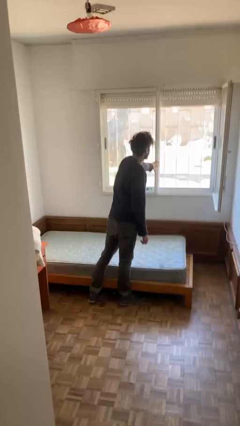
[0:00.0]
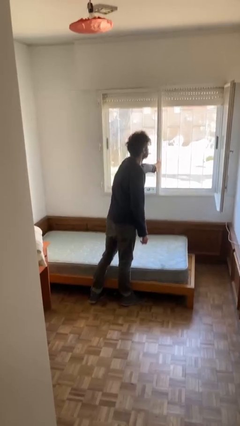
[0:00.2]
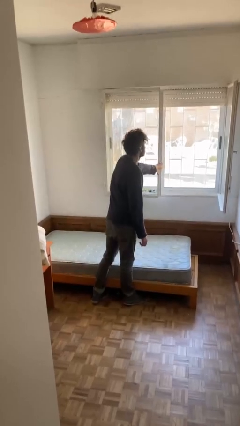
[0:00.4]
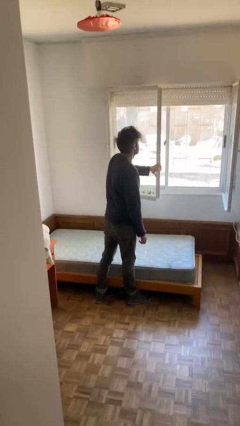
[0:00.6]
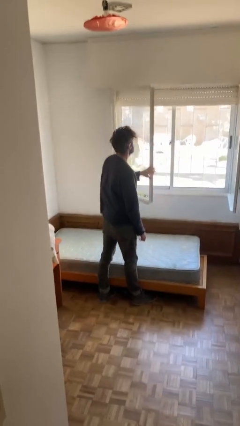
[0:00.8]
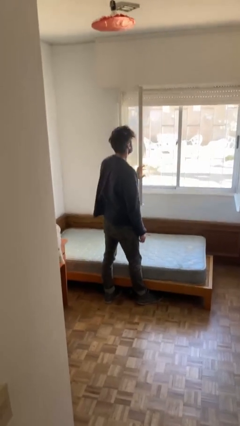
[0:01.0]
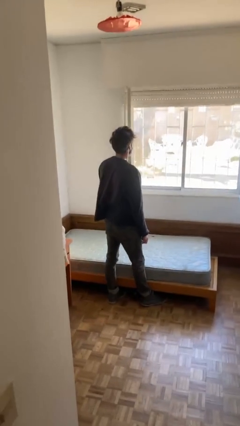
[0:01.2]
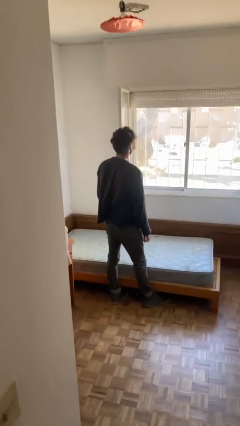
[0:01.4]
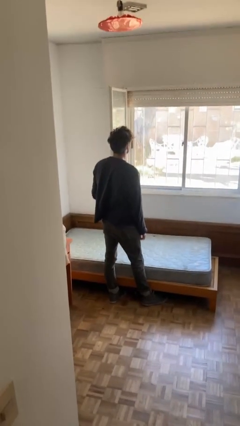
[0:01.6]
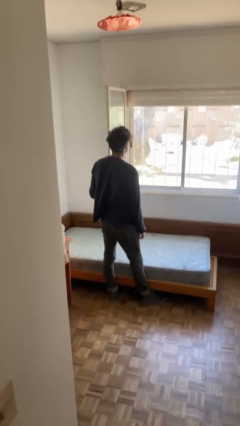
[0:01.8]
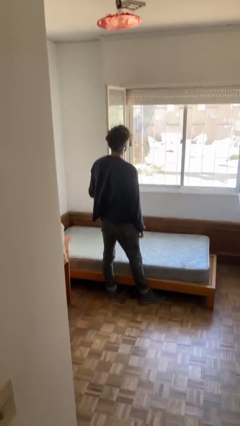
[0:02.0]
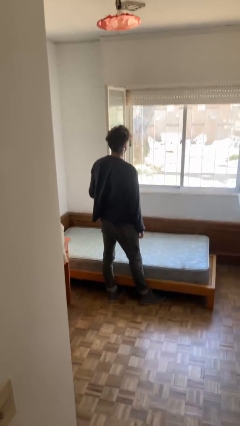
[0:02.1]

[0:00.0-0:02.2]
person opens home window

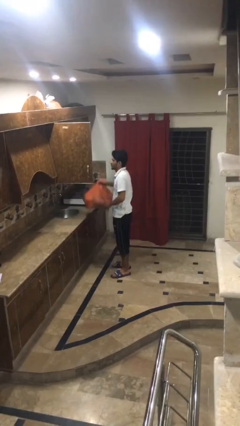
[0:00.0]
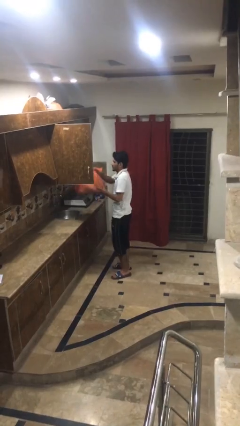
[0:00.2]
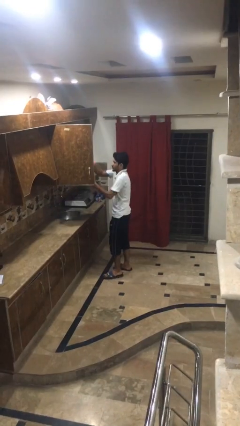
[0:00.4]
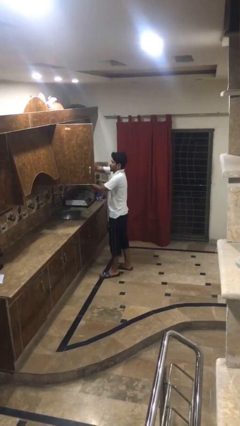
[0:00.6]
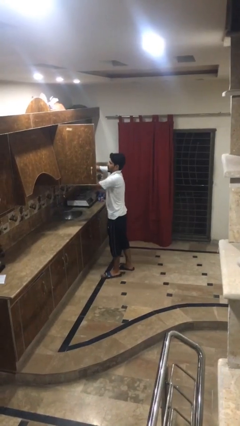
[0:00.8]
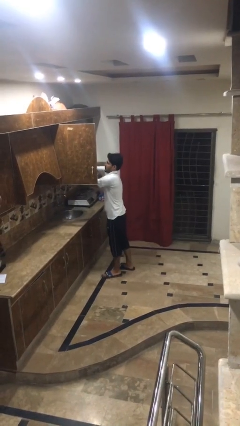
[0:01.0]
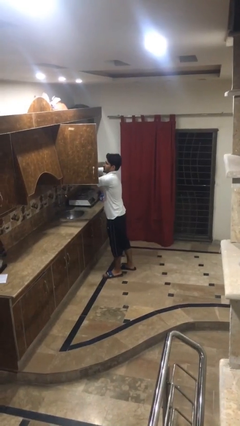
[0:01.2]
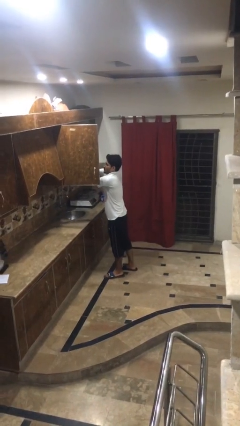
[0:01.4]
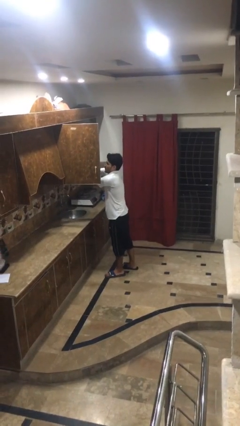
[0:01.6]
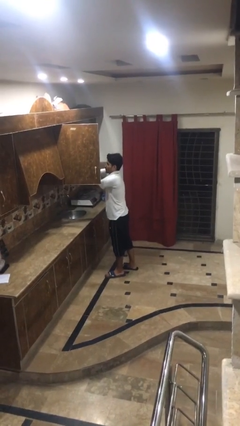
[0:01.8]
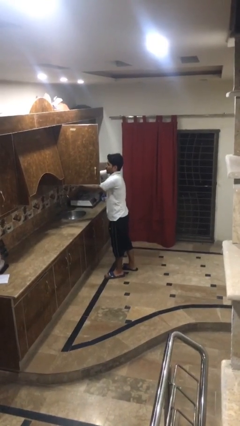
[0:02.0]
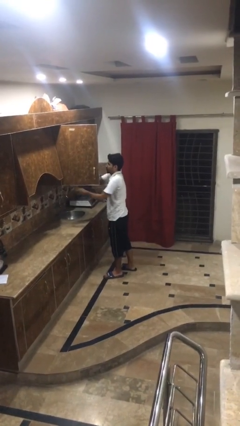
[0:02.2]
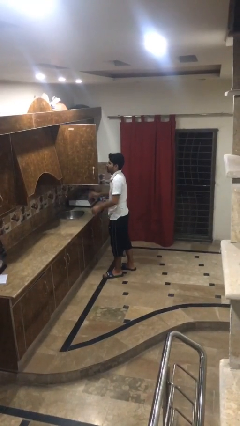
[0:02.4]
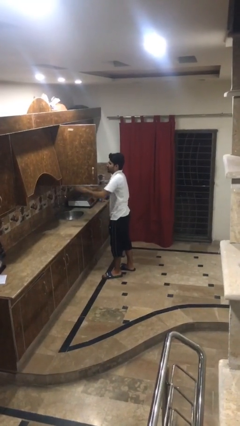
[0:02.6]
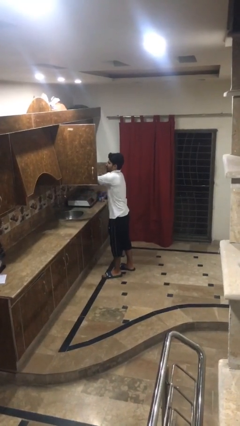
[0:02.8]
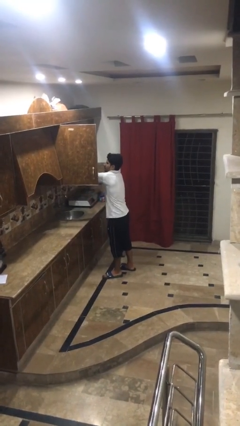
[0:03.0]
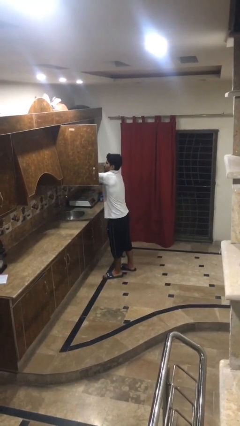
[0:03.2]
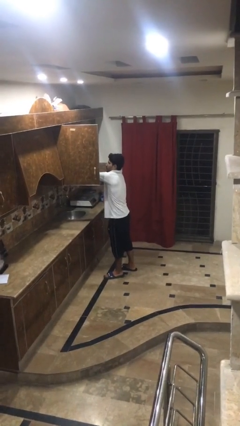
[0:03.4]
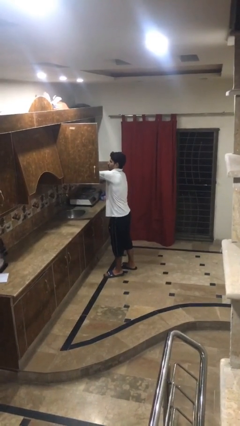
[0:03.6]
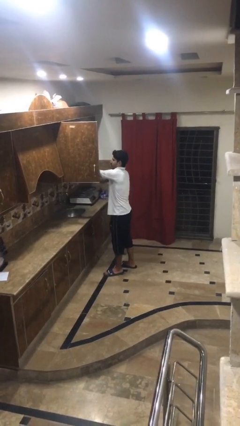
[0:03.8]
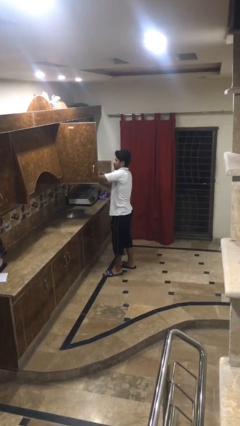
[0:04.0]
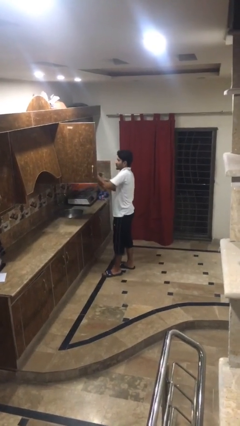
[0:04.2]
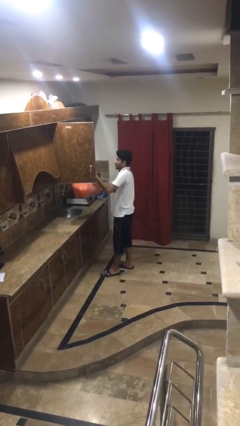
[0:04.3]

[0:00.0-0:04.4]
person loads groceries into cabinet

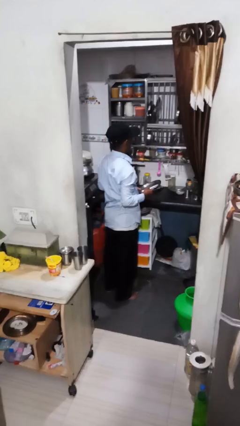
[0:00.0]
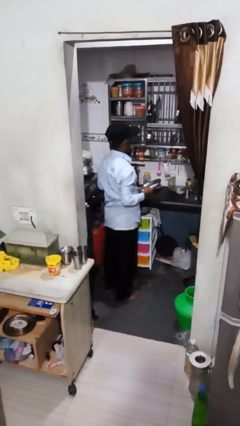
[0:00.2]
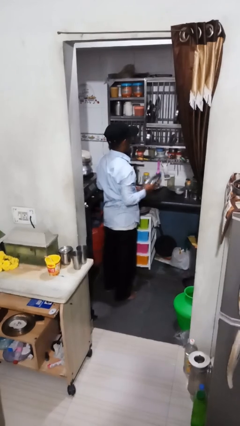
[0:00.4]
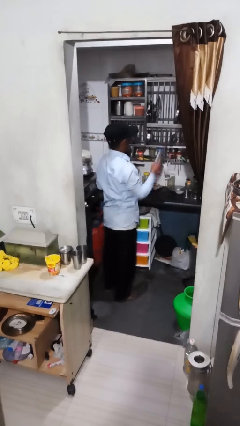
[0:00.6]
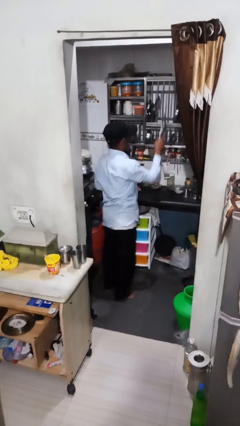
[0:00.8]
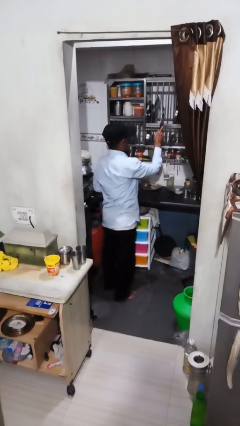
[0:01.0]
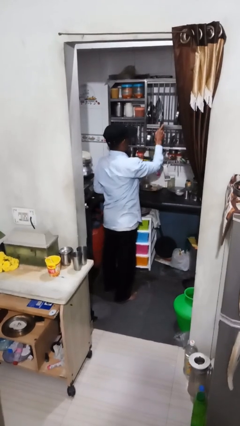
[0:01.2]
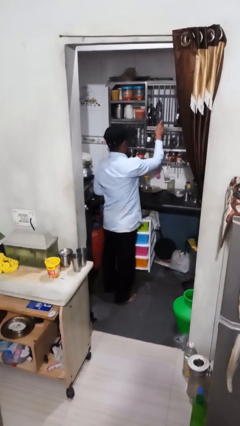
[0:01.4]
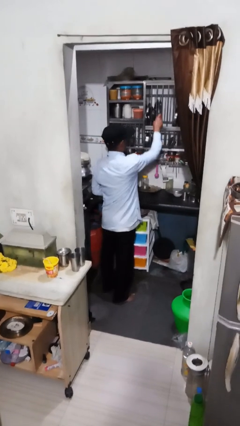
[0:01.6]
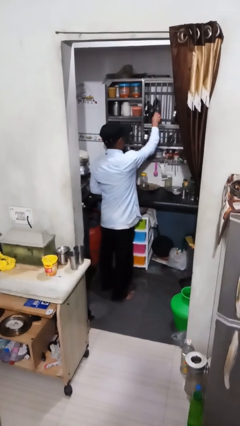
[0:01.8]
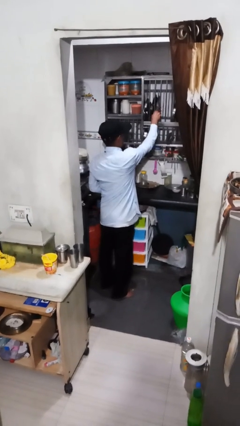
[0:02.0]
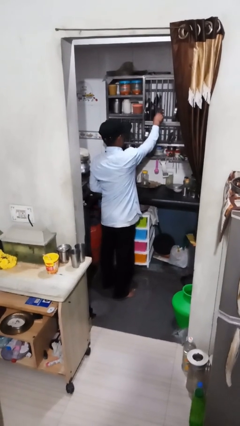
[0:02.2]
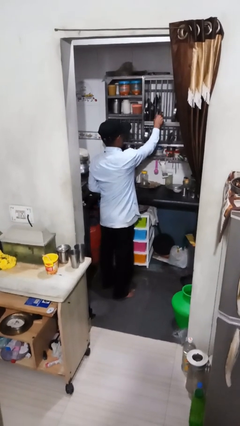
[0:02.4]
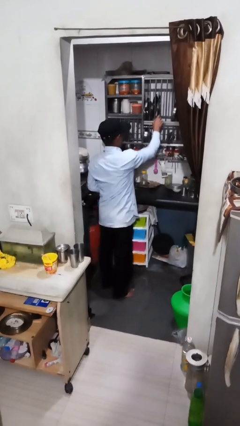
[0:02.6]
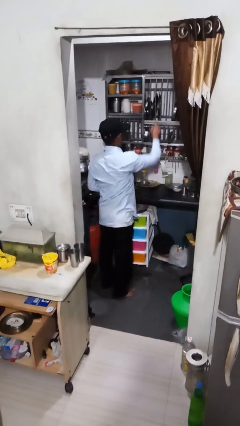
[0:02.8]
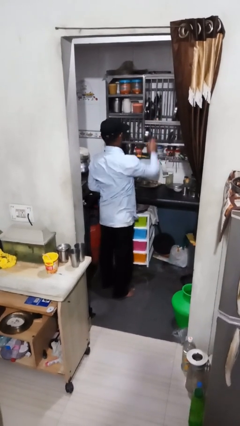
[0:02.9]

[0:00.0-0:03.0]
person puts object in cabinet

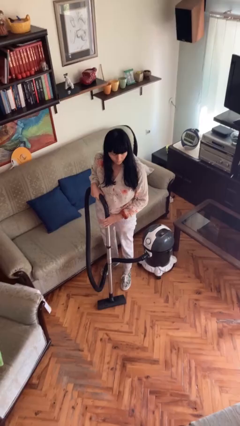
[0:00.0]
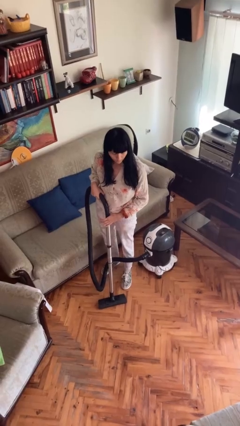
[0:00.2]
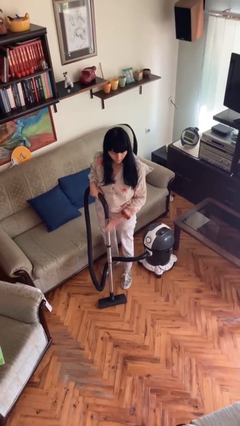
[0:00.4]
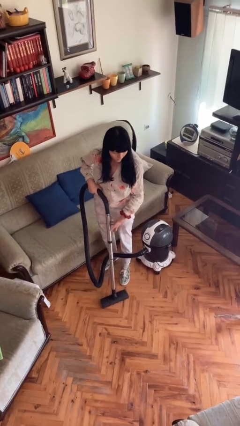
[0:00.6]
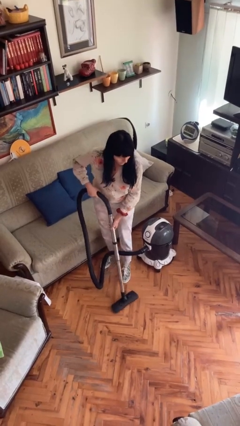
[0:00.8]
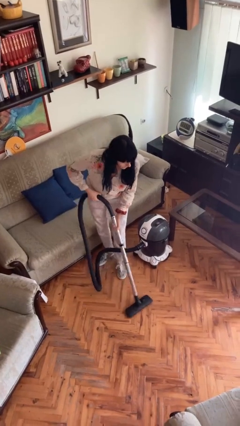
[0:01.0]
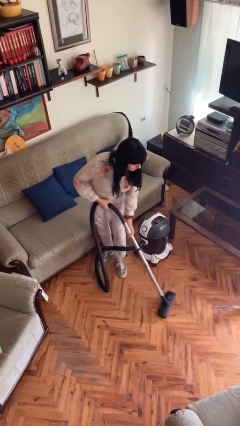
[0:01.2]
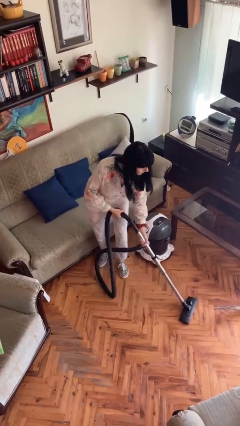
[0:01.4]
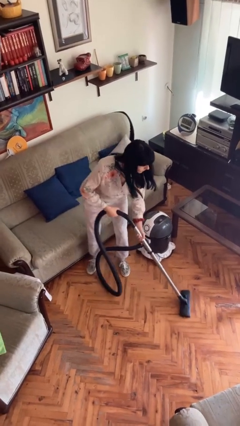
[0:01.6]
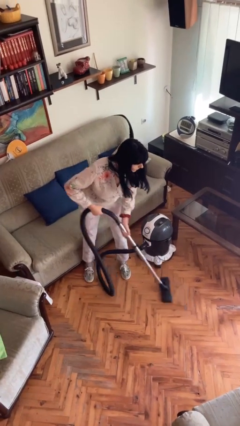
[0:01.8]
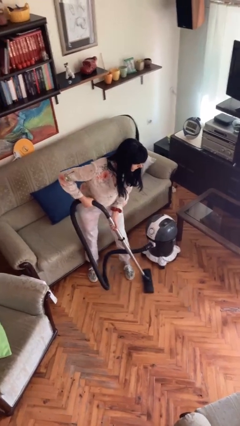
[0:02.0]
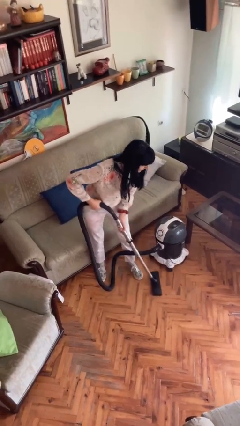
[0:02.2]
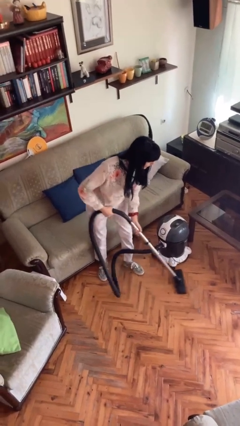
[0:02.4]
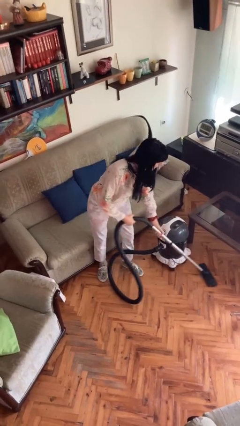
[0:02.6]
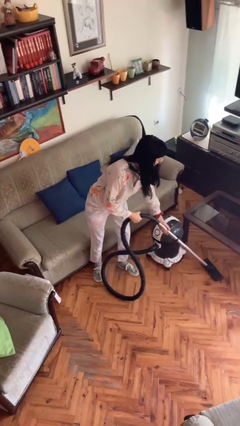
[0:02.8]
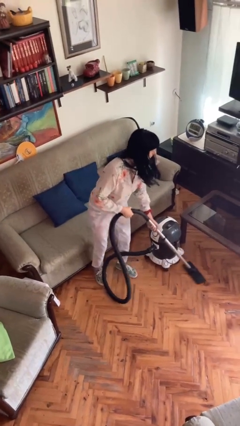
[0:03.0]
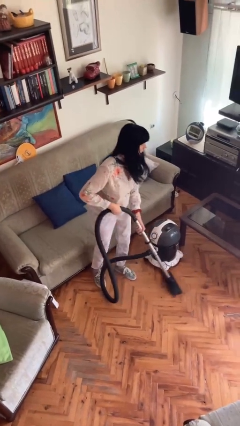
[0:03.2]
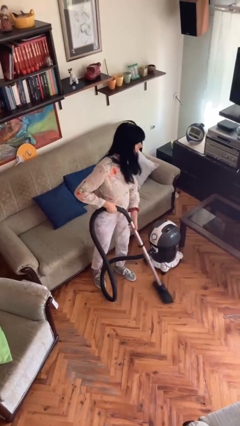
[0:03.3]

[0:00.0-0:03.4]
person vacuums carpet

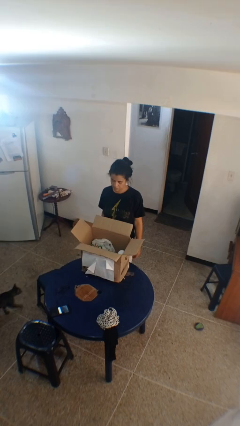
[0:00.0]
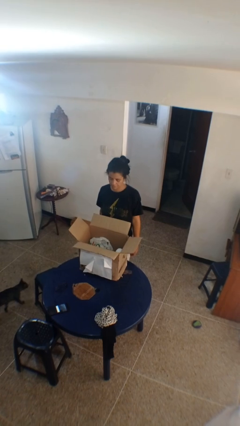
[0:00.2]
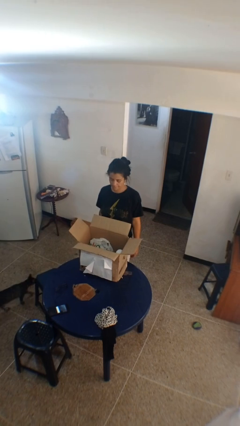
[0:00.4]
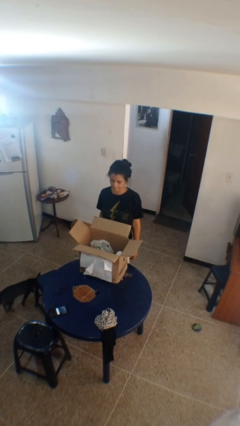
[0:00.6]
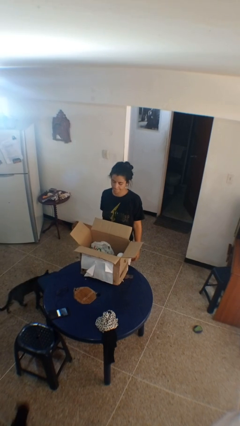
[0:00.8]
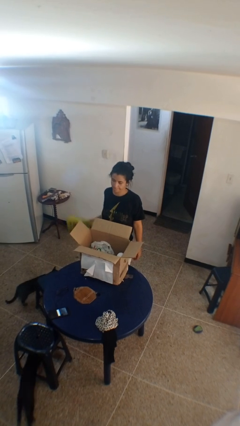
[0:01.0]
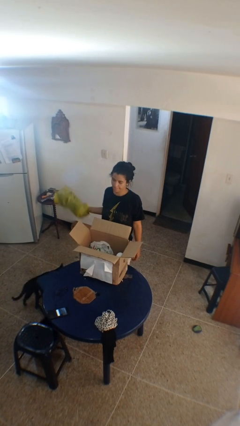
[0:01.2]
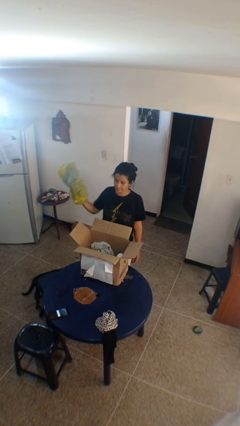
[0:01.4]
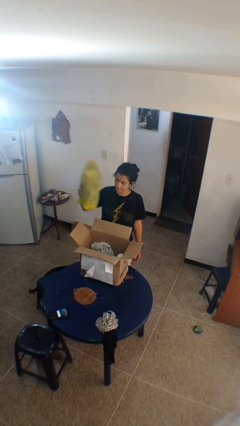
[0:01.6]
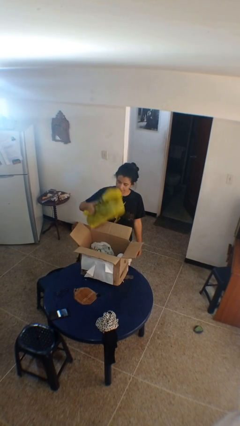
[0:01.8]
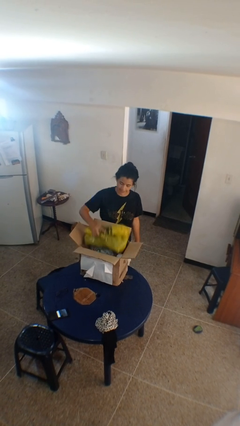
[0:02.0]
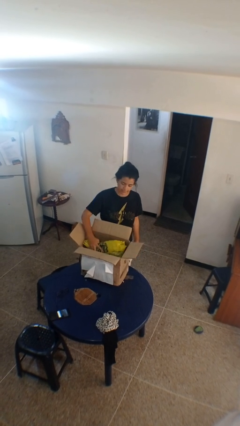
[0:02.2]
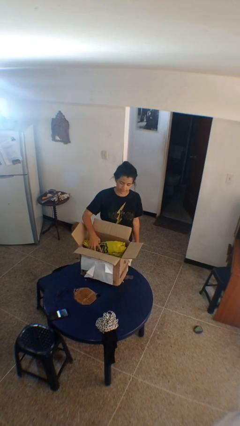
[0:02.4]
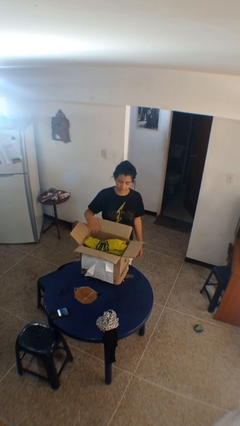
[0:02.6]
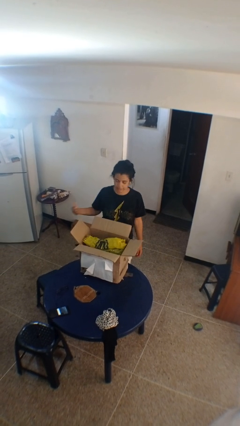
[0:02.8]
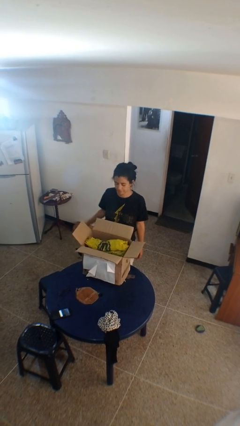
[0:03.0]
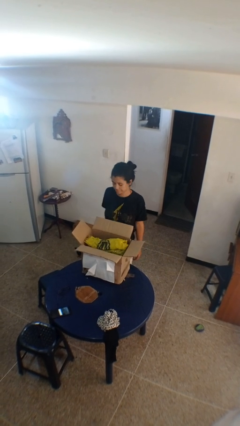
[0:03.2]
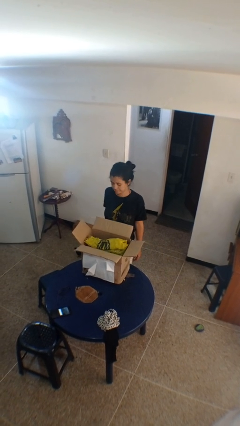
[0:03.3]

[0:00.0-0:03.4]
person puts object into box

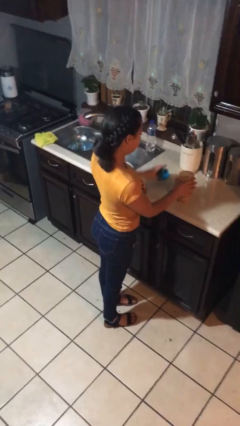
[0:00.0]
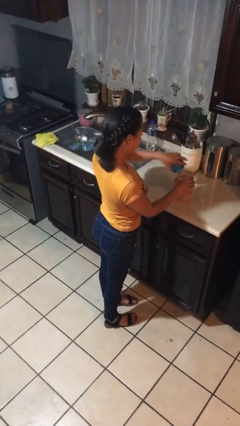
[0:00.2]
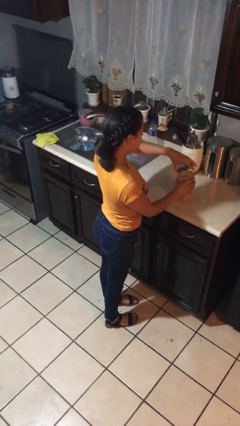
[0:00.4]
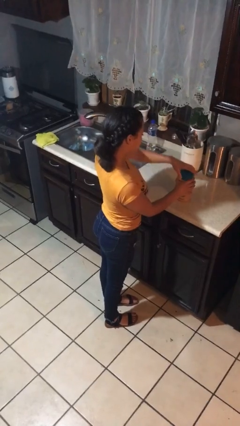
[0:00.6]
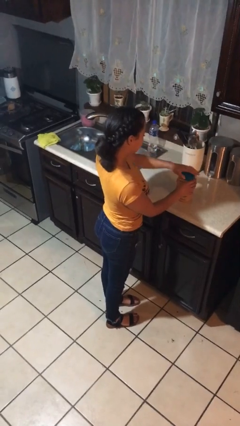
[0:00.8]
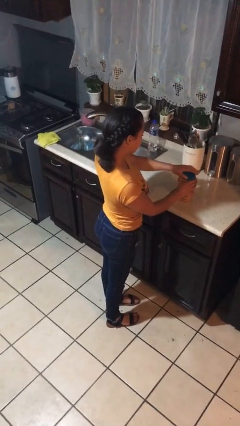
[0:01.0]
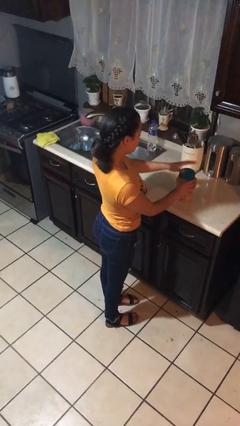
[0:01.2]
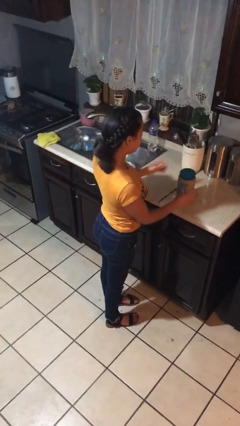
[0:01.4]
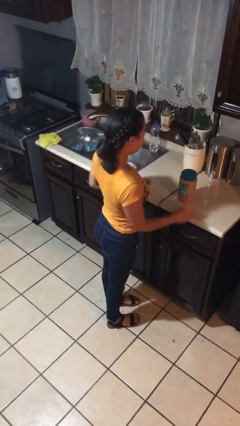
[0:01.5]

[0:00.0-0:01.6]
person closes jar
